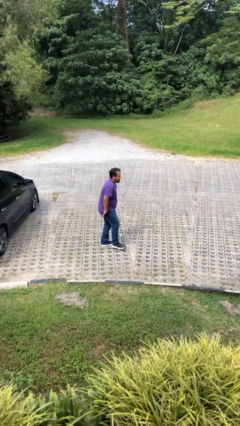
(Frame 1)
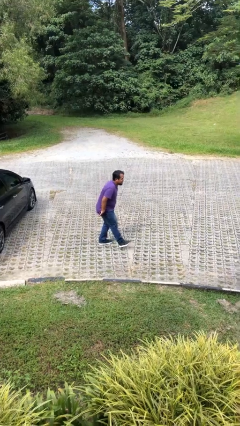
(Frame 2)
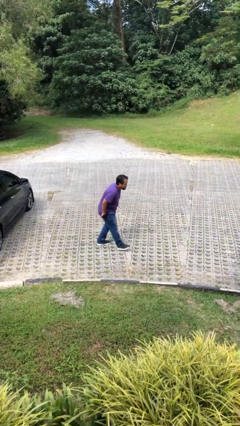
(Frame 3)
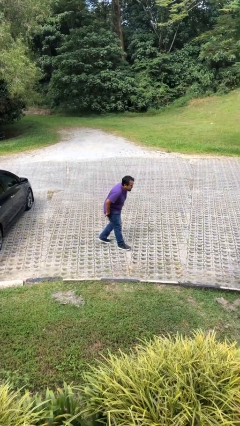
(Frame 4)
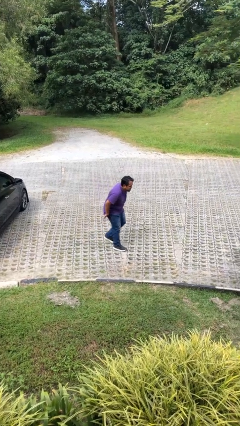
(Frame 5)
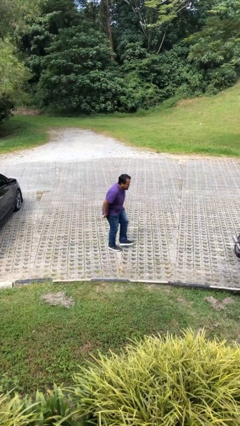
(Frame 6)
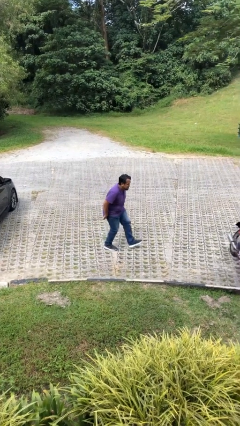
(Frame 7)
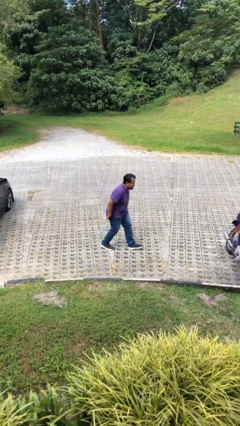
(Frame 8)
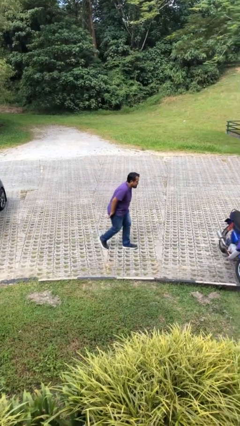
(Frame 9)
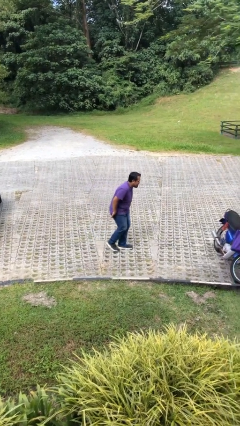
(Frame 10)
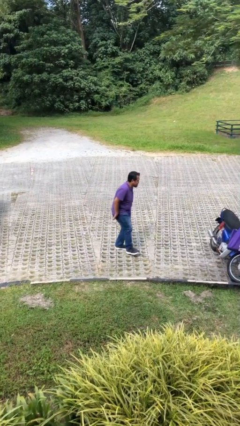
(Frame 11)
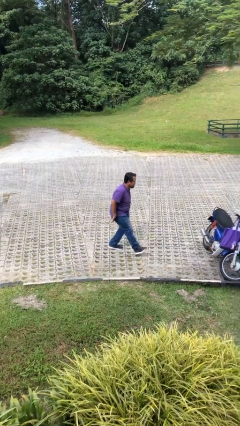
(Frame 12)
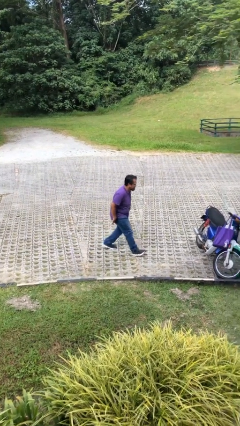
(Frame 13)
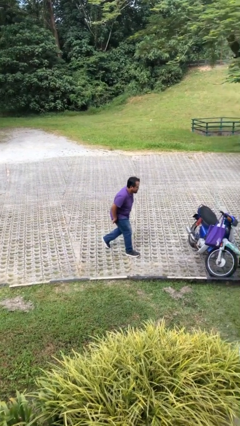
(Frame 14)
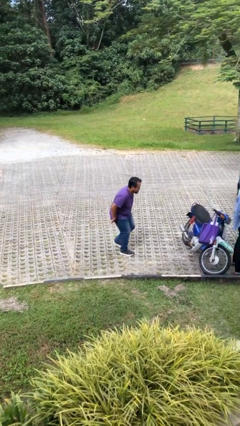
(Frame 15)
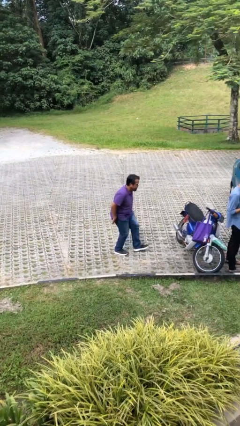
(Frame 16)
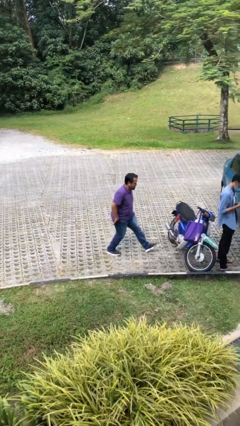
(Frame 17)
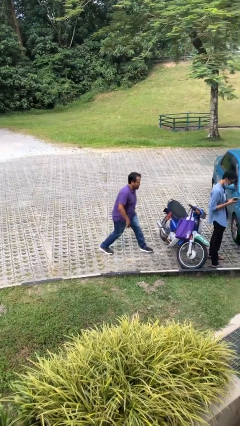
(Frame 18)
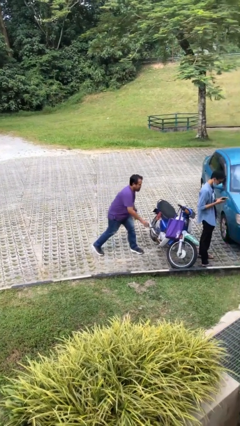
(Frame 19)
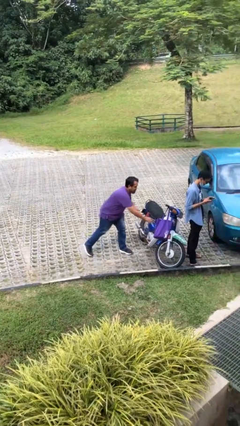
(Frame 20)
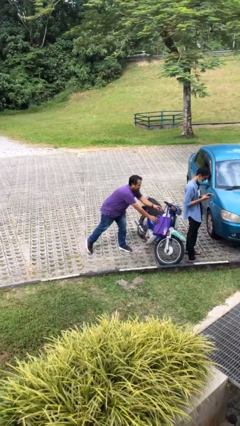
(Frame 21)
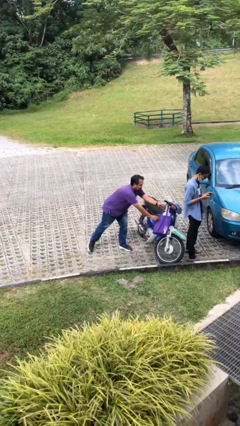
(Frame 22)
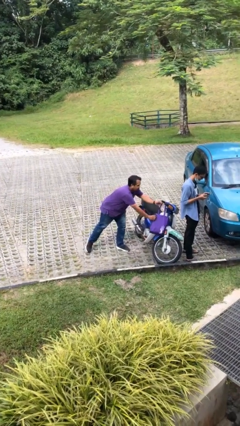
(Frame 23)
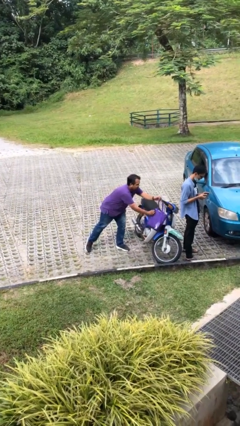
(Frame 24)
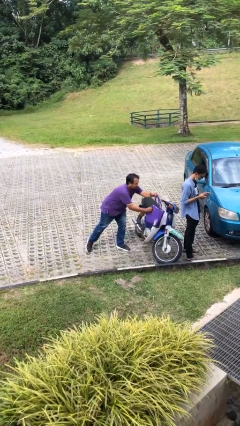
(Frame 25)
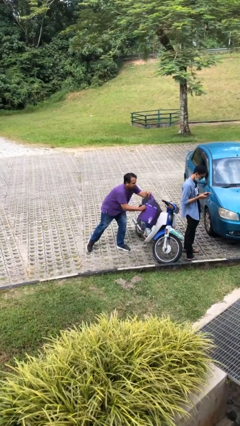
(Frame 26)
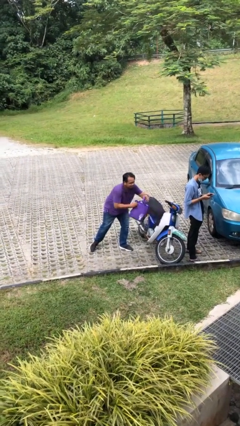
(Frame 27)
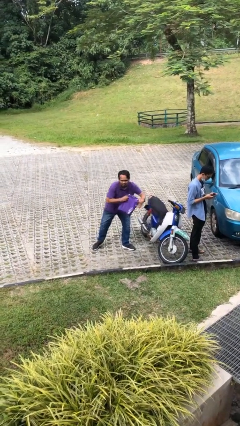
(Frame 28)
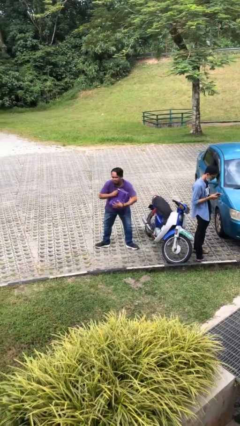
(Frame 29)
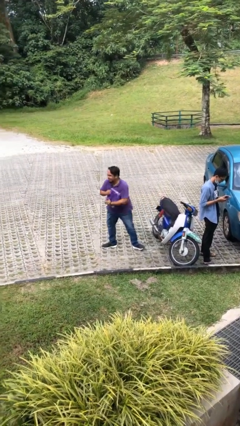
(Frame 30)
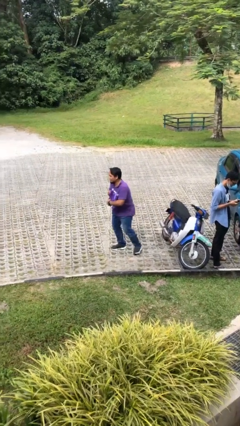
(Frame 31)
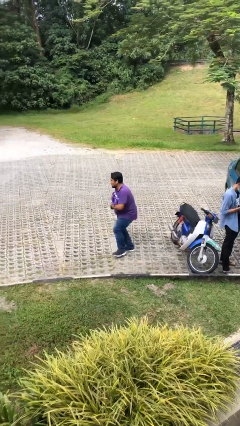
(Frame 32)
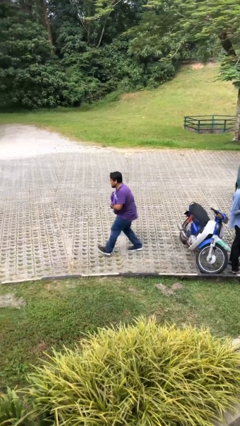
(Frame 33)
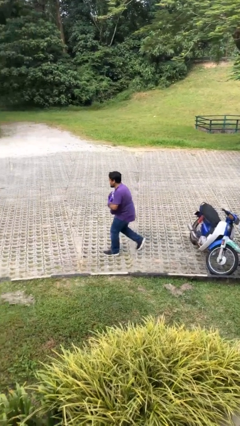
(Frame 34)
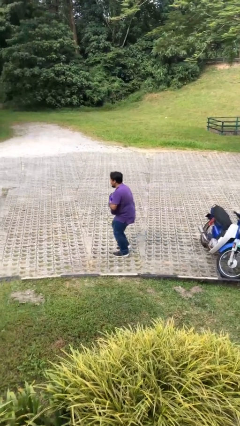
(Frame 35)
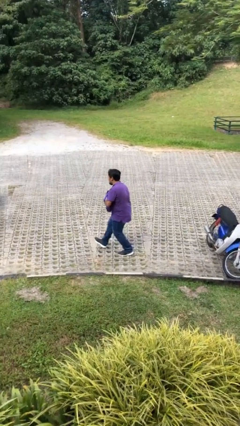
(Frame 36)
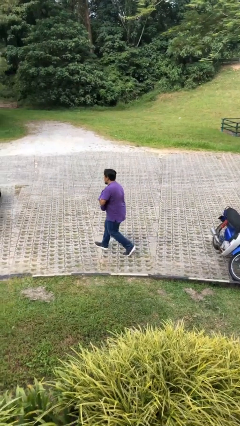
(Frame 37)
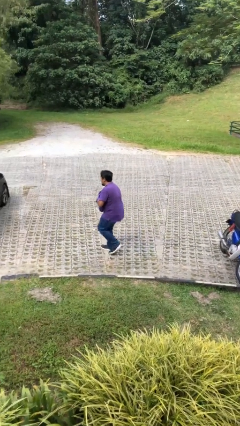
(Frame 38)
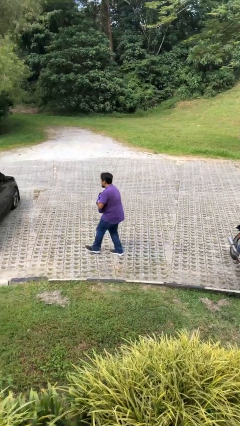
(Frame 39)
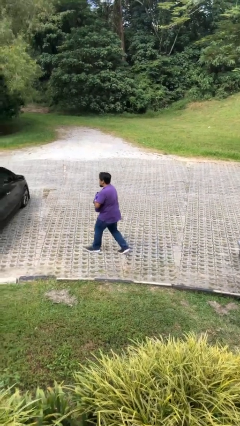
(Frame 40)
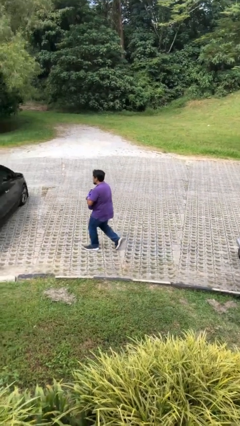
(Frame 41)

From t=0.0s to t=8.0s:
person steals object from person

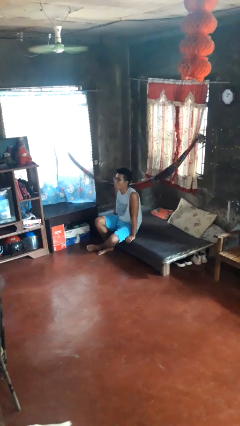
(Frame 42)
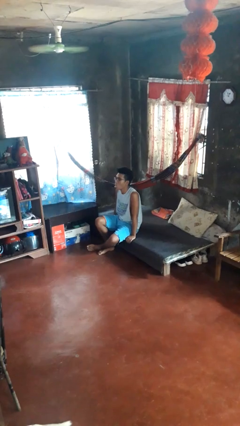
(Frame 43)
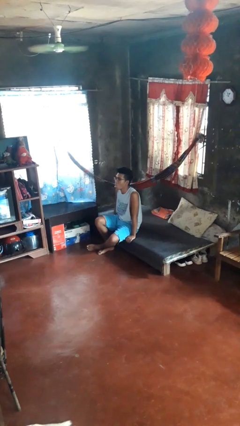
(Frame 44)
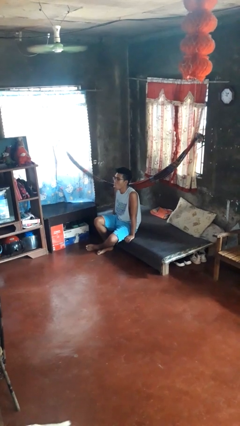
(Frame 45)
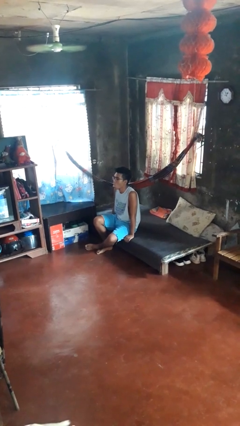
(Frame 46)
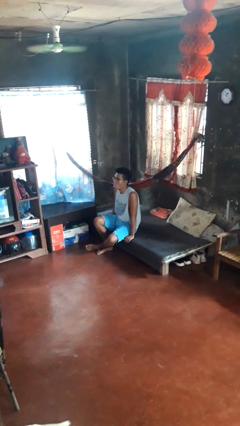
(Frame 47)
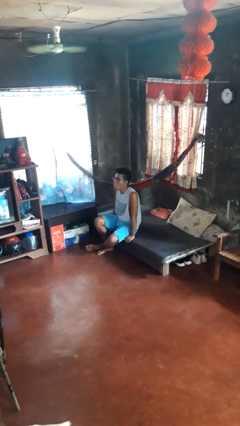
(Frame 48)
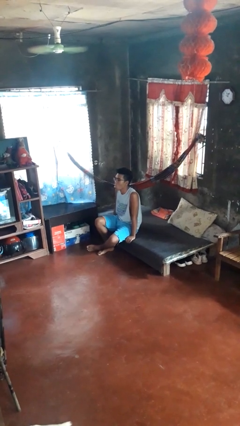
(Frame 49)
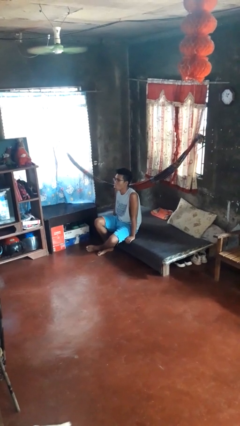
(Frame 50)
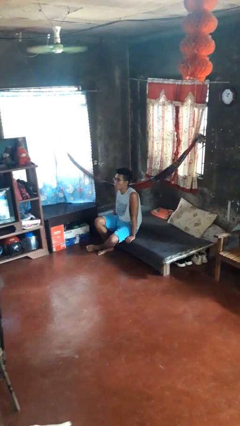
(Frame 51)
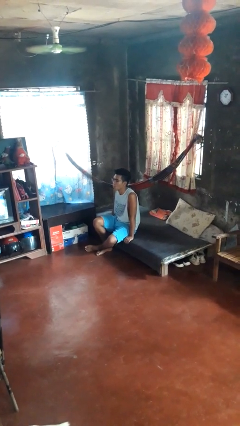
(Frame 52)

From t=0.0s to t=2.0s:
person sticks out tongue

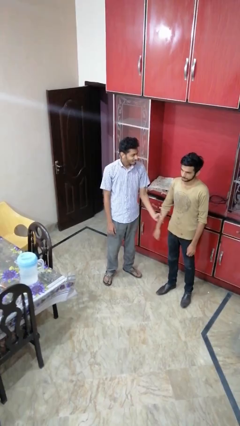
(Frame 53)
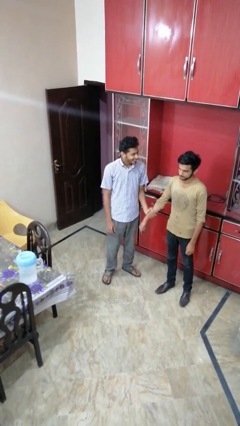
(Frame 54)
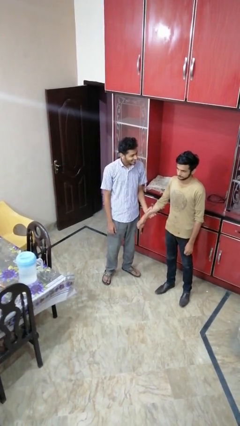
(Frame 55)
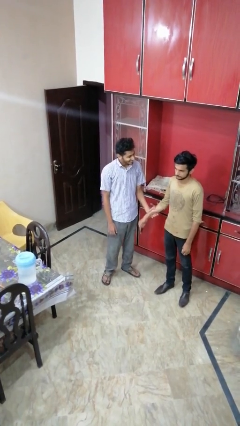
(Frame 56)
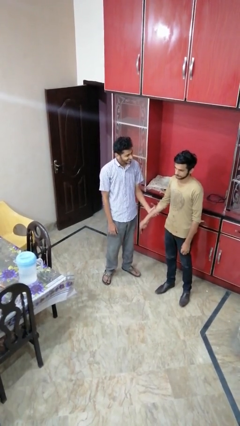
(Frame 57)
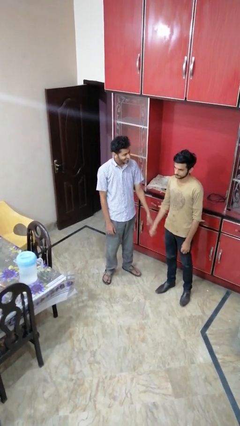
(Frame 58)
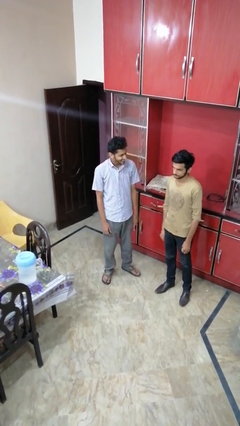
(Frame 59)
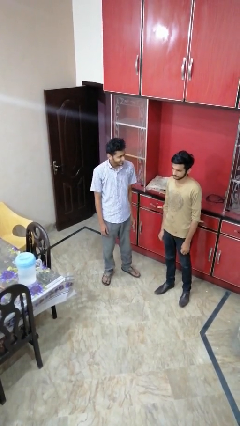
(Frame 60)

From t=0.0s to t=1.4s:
person grabs person by forearm

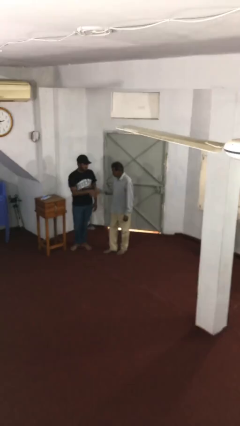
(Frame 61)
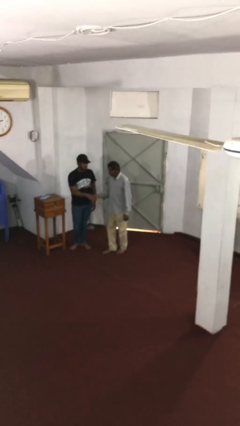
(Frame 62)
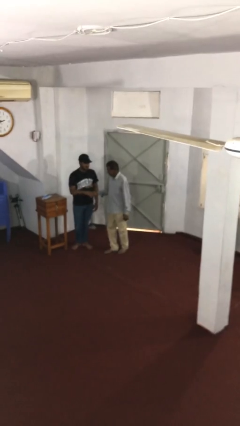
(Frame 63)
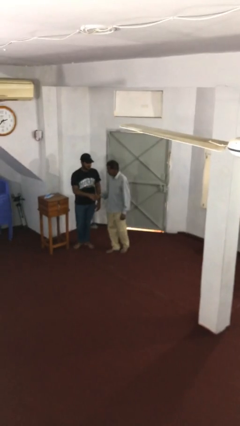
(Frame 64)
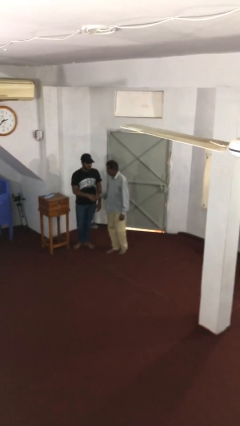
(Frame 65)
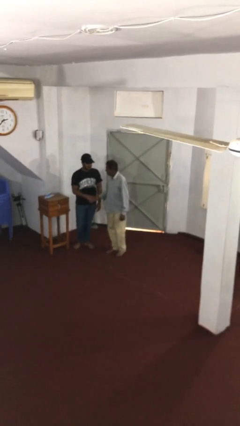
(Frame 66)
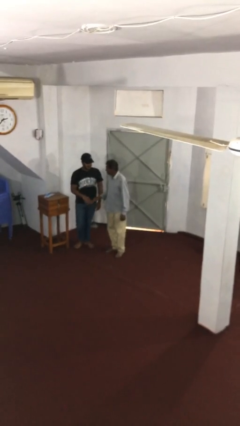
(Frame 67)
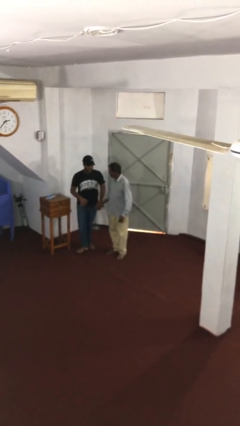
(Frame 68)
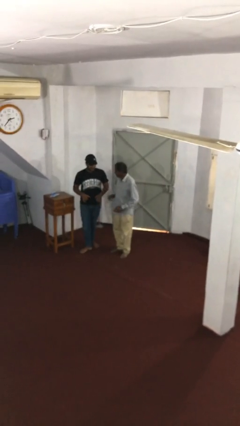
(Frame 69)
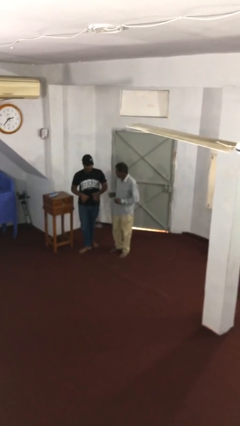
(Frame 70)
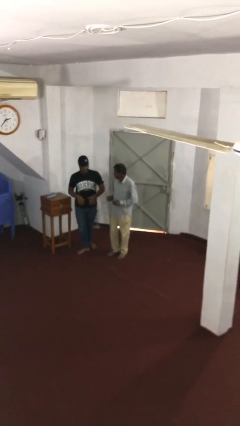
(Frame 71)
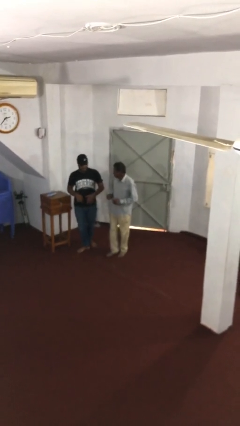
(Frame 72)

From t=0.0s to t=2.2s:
person shakes hand

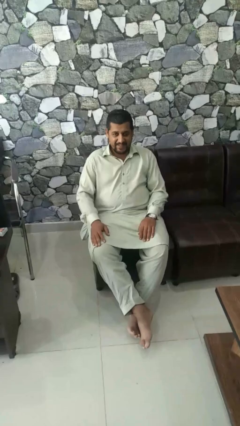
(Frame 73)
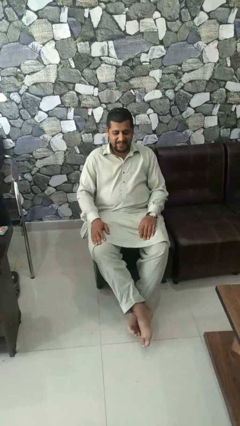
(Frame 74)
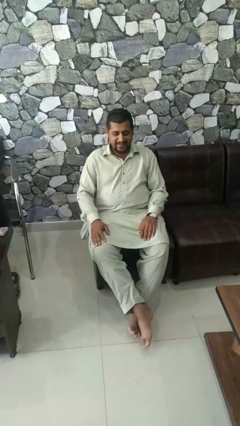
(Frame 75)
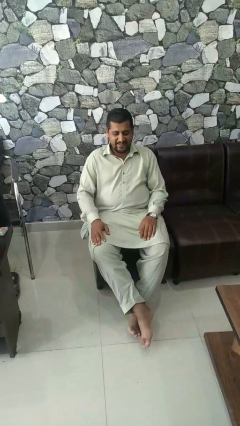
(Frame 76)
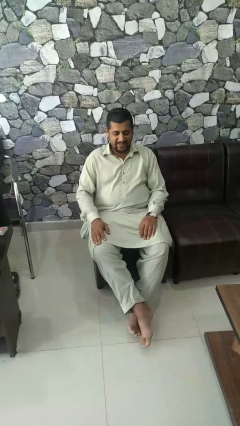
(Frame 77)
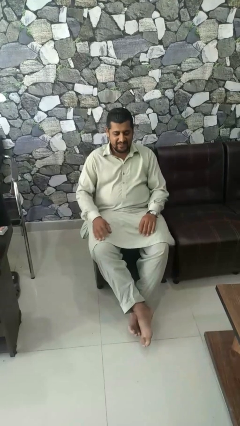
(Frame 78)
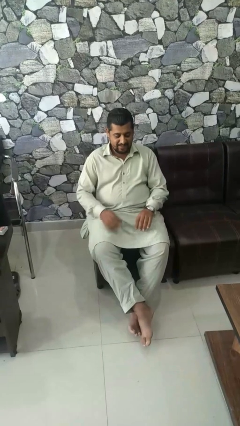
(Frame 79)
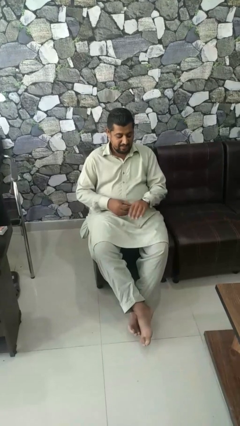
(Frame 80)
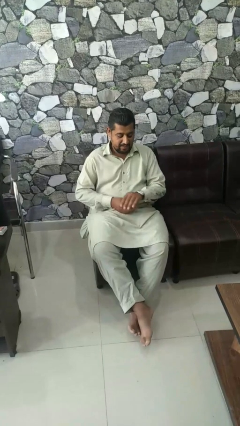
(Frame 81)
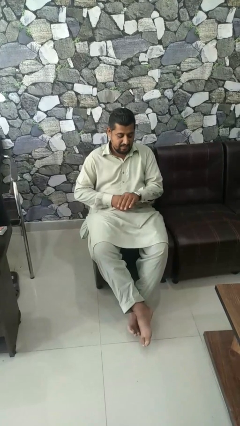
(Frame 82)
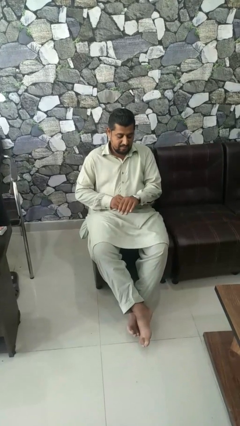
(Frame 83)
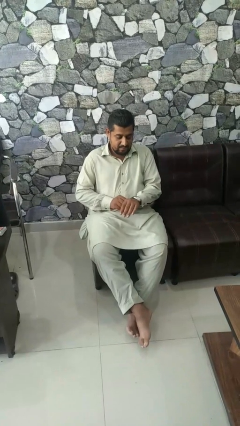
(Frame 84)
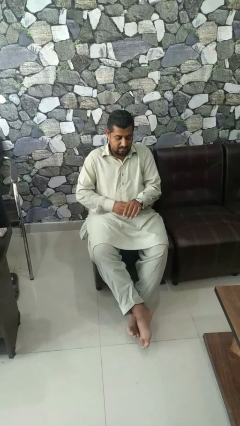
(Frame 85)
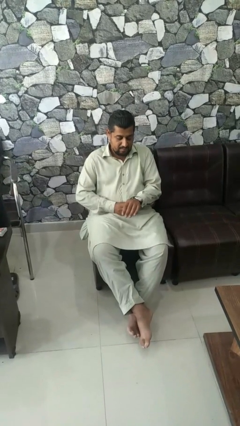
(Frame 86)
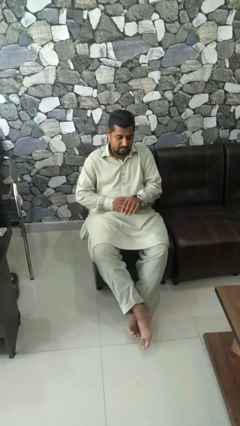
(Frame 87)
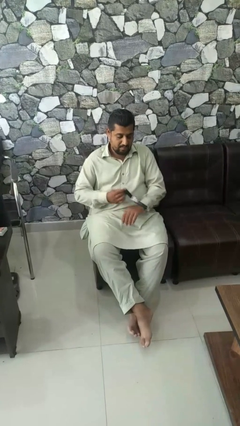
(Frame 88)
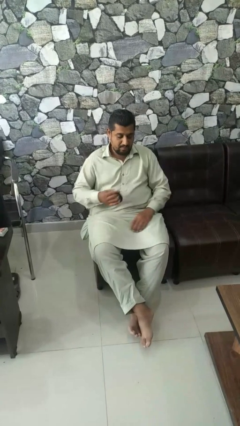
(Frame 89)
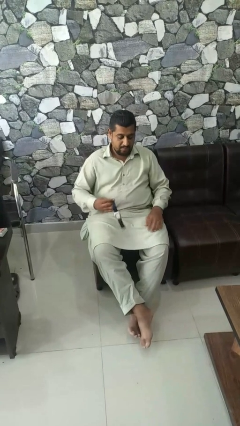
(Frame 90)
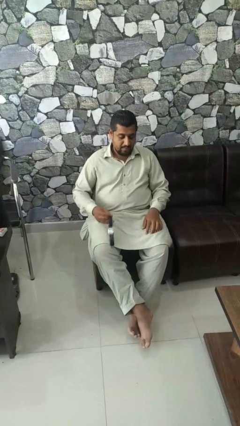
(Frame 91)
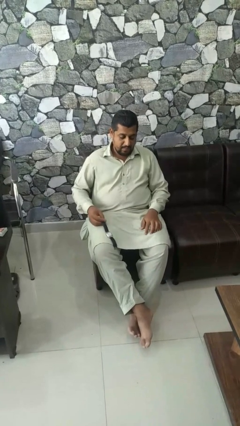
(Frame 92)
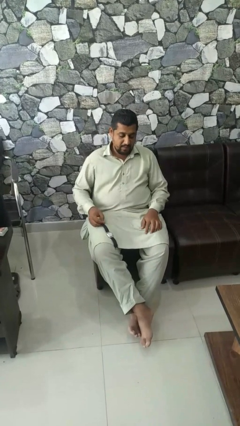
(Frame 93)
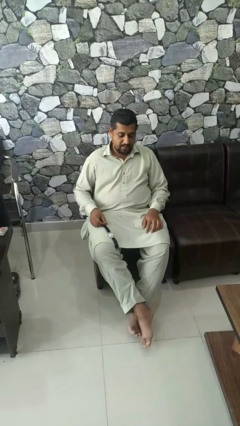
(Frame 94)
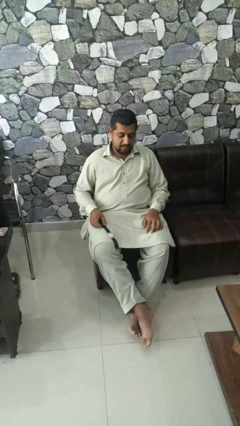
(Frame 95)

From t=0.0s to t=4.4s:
person takes off wristwatch
